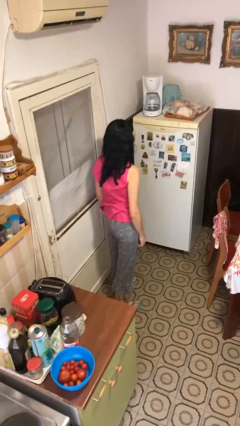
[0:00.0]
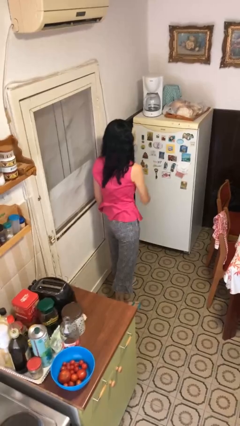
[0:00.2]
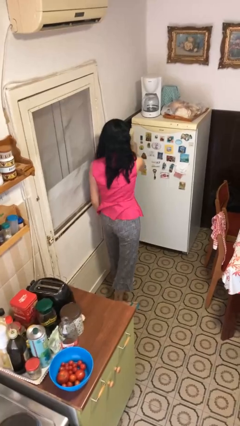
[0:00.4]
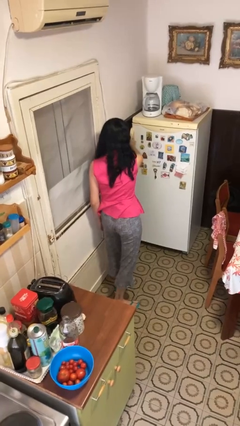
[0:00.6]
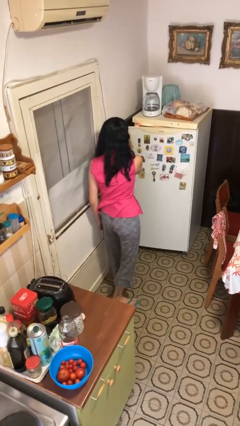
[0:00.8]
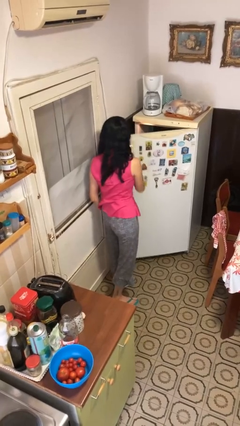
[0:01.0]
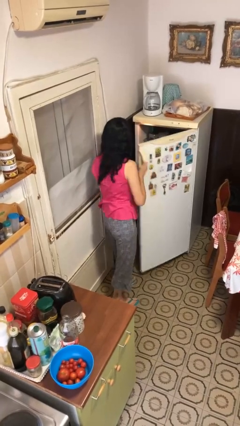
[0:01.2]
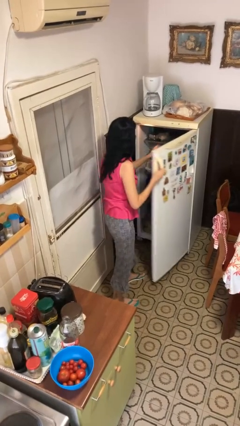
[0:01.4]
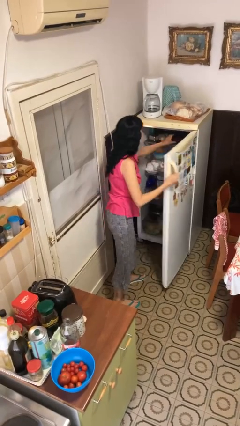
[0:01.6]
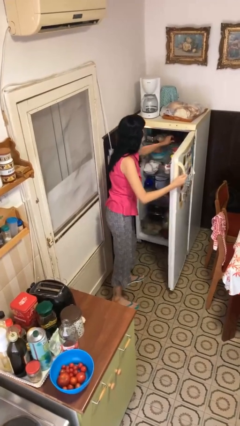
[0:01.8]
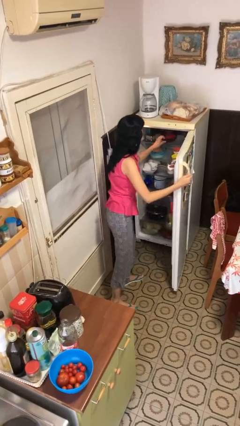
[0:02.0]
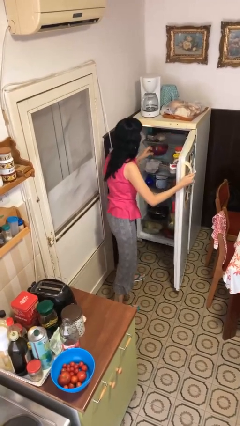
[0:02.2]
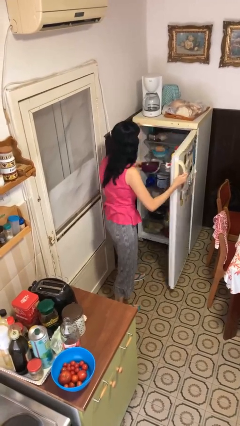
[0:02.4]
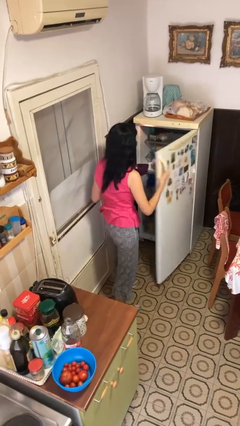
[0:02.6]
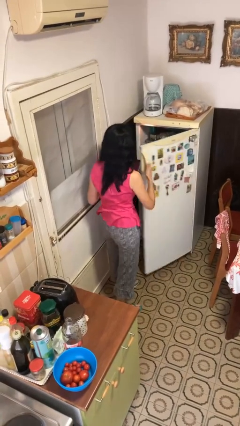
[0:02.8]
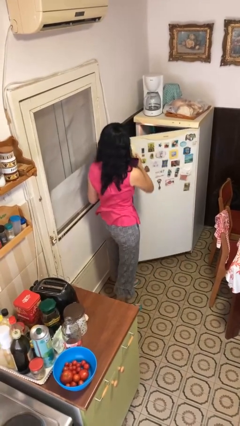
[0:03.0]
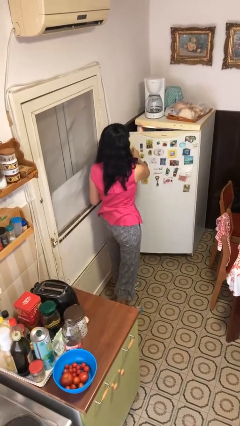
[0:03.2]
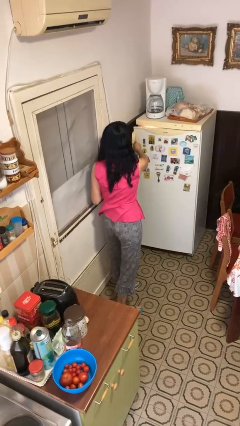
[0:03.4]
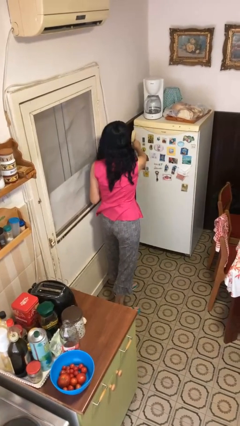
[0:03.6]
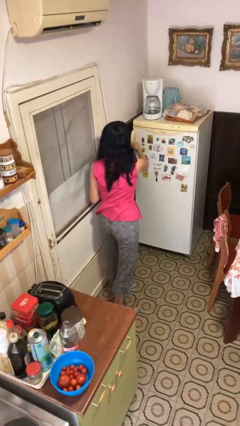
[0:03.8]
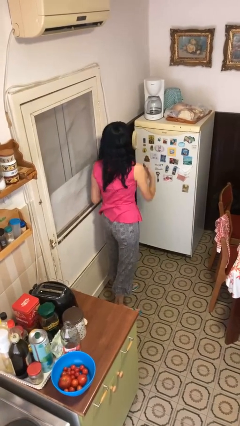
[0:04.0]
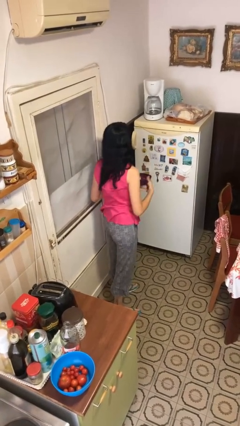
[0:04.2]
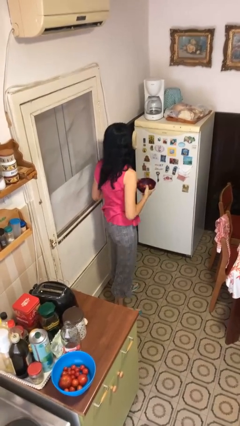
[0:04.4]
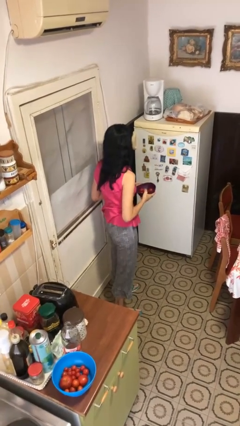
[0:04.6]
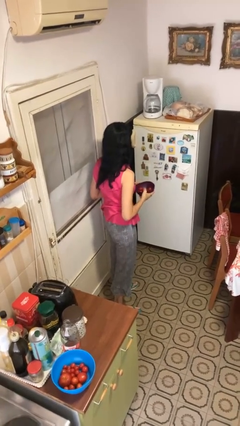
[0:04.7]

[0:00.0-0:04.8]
person takes object from refrigerator

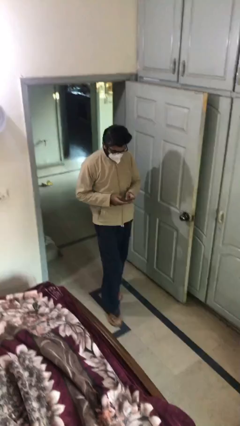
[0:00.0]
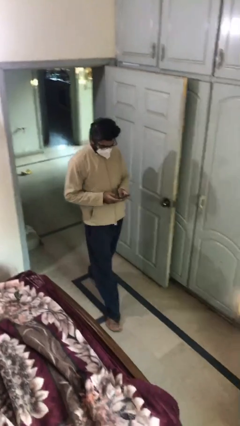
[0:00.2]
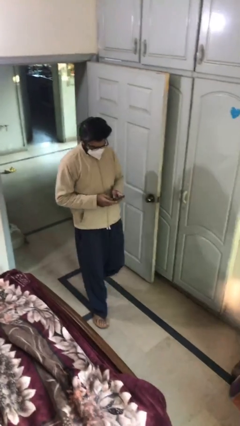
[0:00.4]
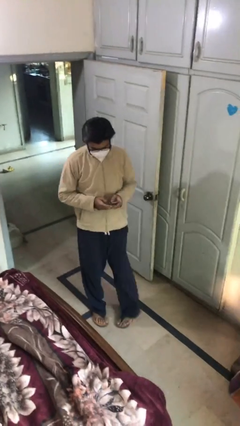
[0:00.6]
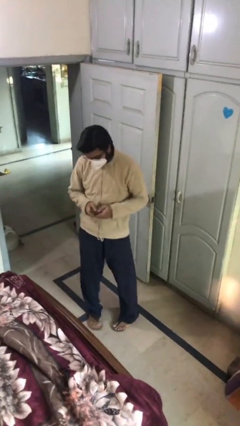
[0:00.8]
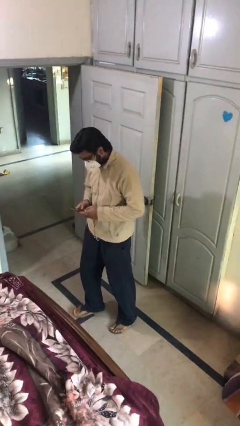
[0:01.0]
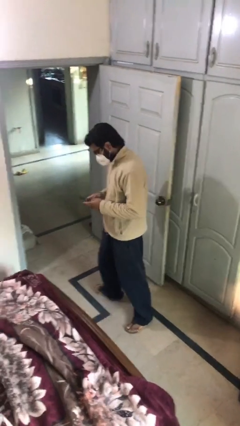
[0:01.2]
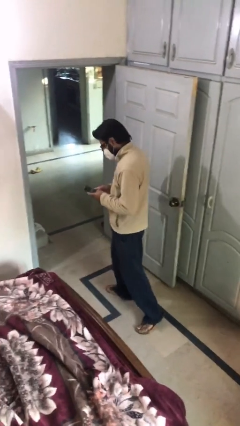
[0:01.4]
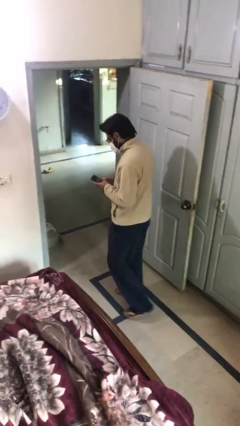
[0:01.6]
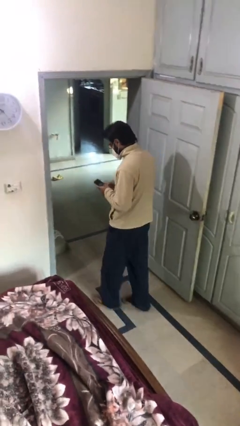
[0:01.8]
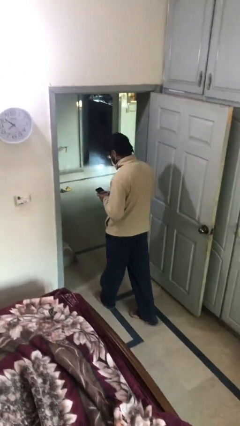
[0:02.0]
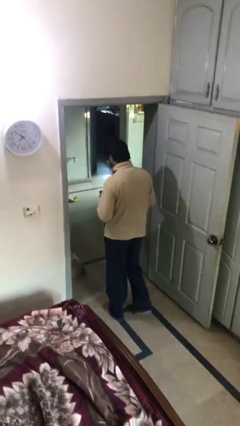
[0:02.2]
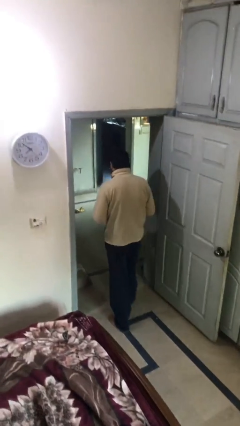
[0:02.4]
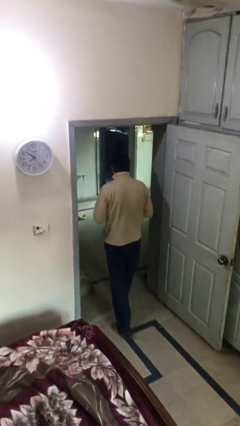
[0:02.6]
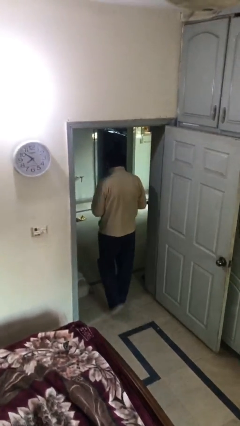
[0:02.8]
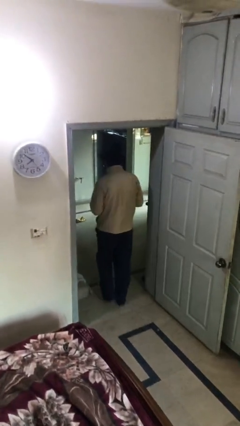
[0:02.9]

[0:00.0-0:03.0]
person exits scene through structure

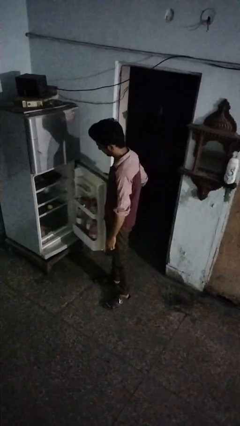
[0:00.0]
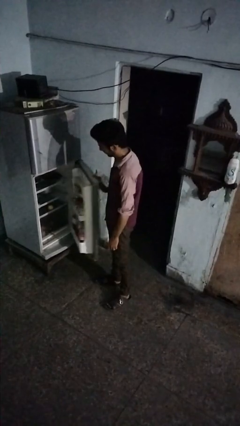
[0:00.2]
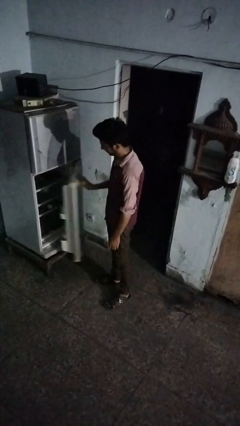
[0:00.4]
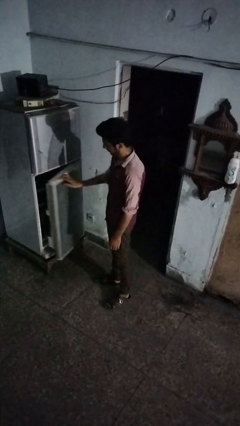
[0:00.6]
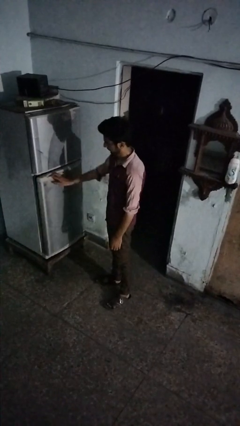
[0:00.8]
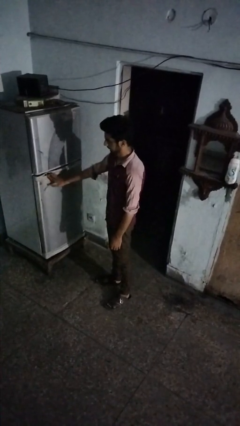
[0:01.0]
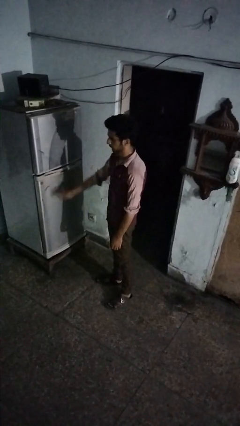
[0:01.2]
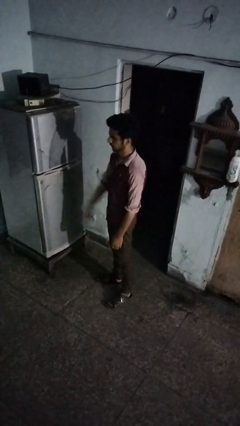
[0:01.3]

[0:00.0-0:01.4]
person closes refrigerator

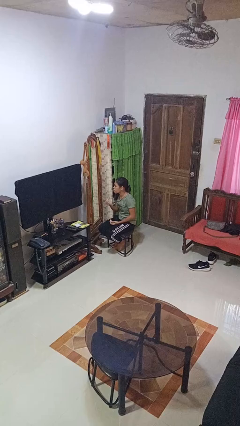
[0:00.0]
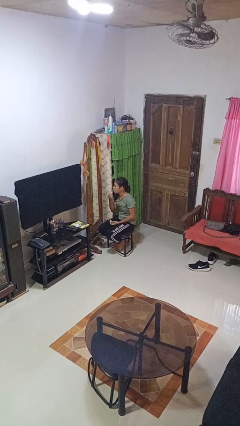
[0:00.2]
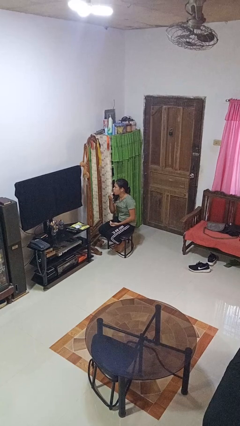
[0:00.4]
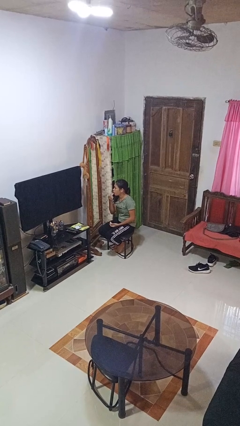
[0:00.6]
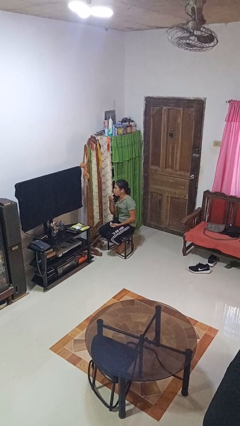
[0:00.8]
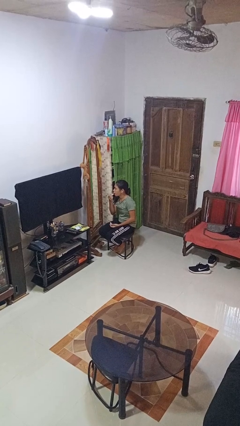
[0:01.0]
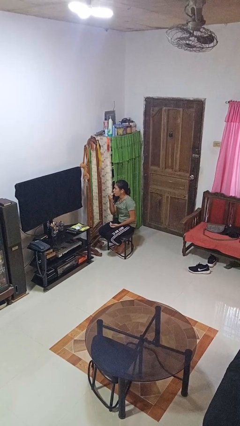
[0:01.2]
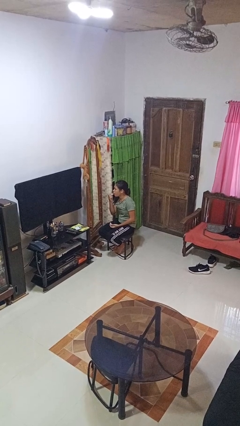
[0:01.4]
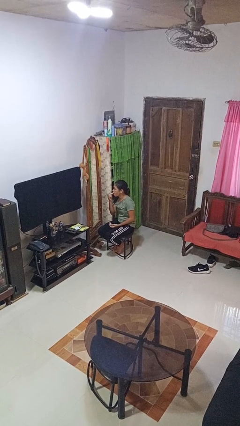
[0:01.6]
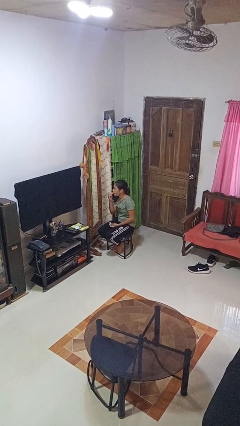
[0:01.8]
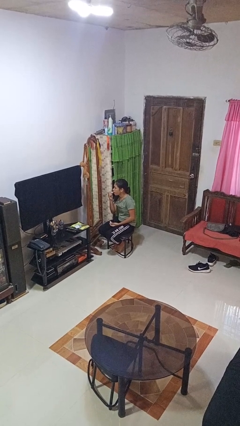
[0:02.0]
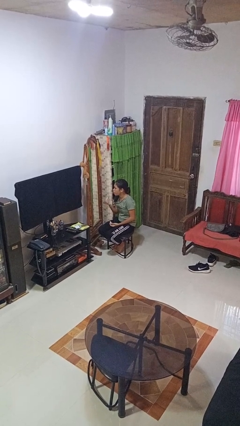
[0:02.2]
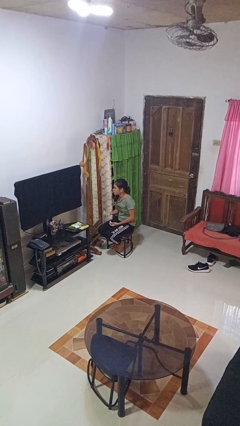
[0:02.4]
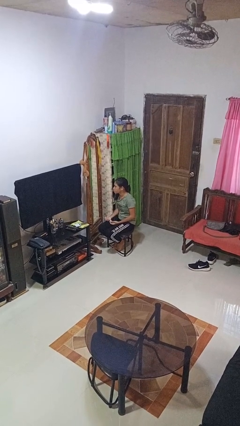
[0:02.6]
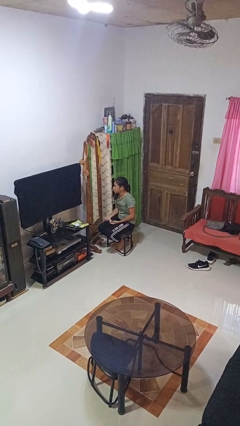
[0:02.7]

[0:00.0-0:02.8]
person applies lip makeup

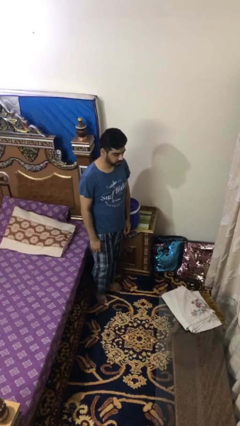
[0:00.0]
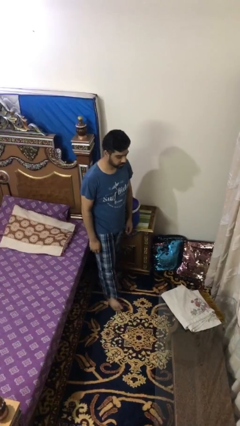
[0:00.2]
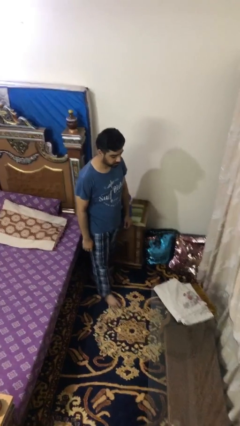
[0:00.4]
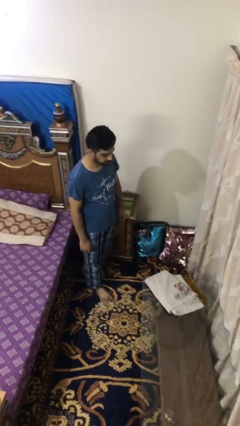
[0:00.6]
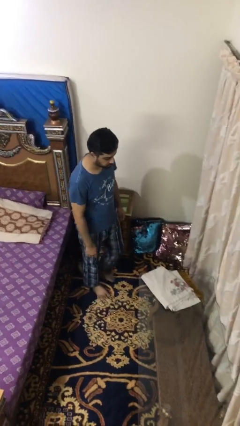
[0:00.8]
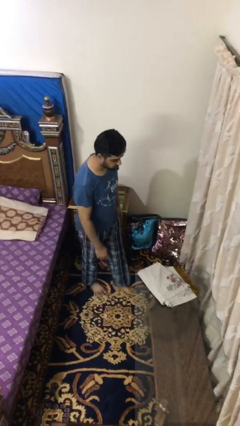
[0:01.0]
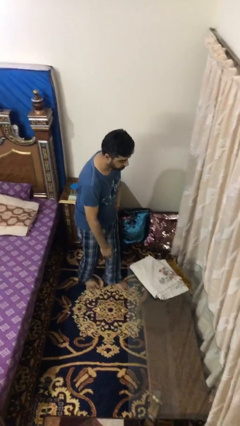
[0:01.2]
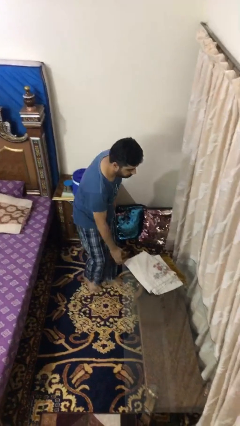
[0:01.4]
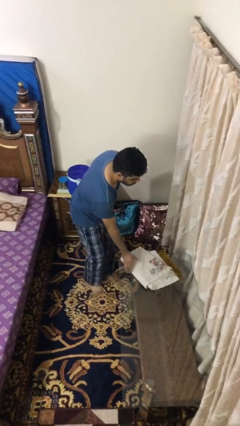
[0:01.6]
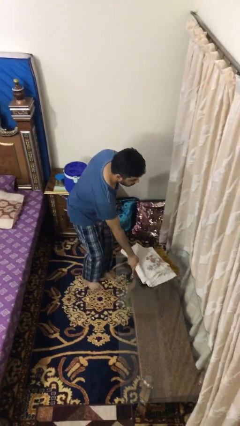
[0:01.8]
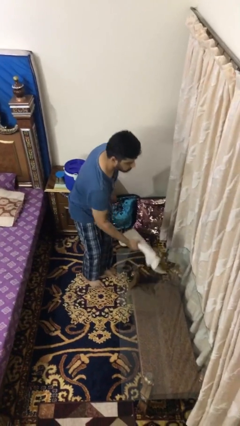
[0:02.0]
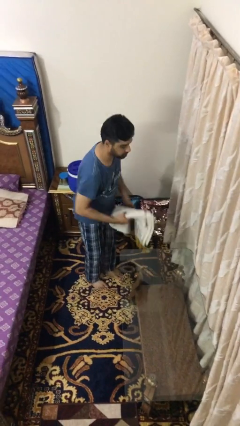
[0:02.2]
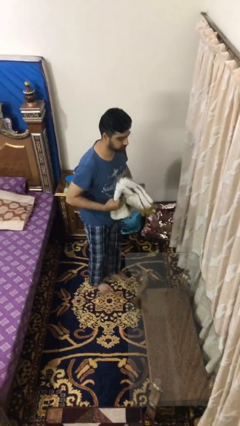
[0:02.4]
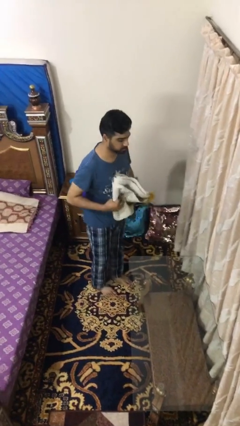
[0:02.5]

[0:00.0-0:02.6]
person picks up object from table

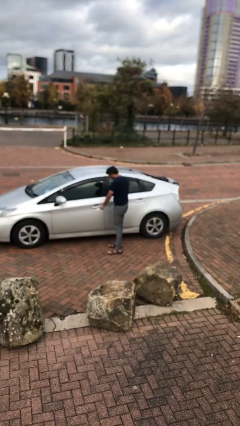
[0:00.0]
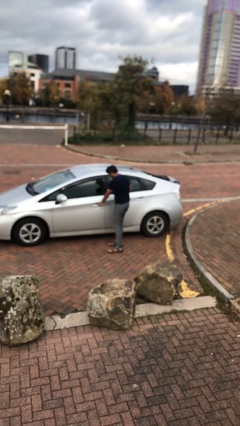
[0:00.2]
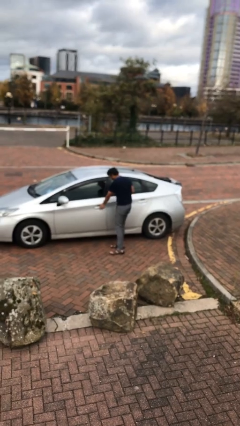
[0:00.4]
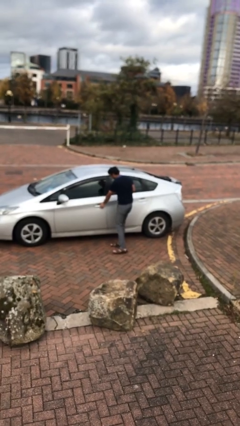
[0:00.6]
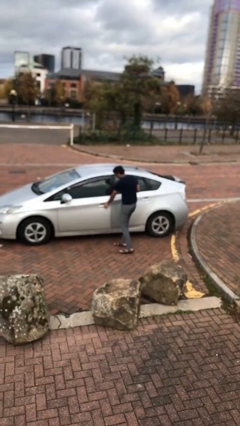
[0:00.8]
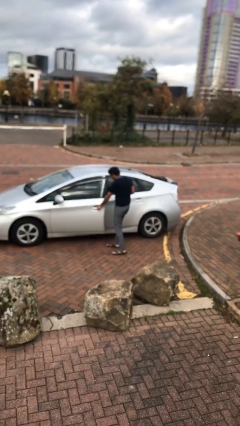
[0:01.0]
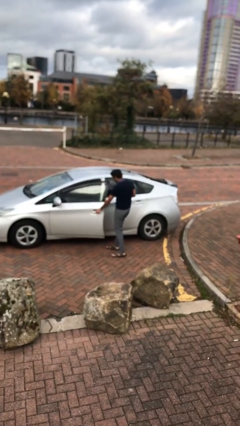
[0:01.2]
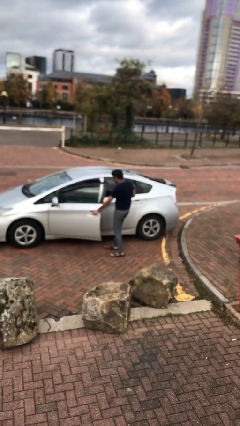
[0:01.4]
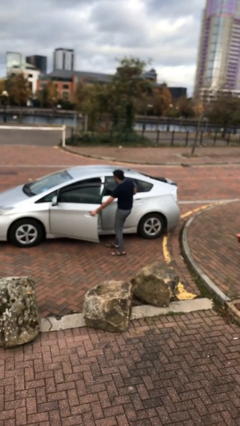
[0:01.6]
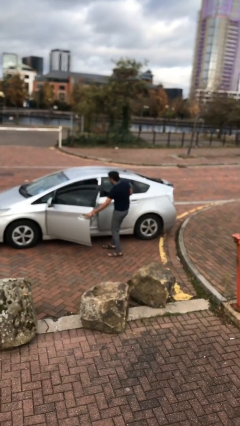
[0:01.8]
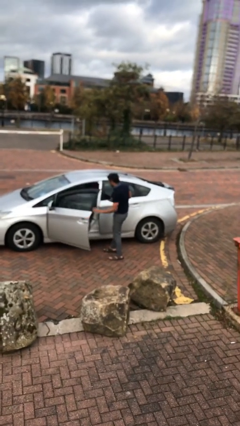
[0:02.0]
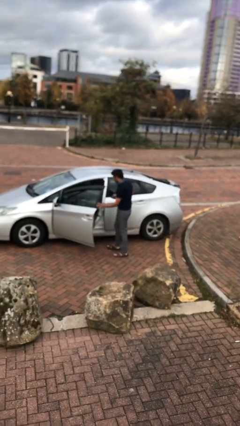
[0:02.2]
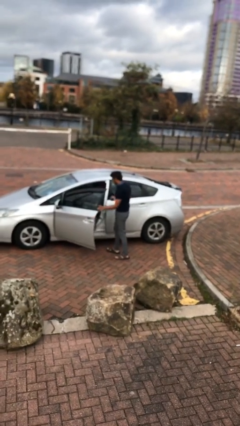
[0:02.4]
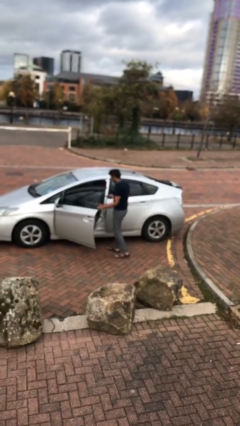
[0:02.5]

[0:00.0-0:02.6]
person opens car door

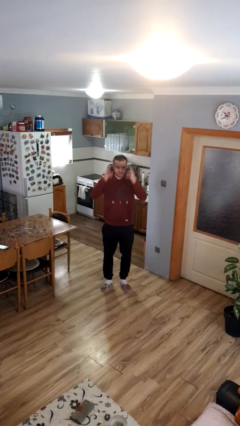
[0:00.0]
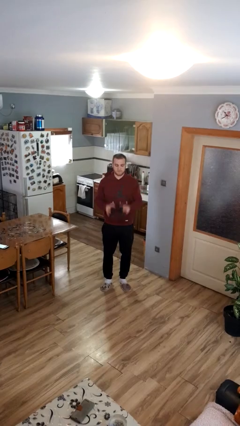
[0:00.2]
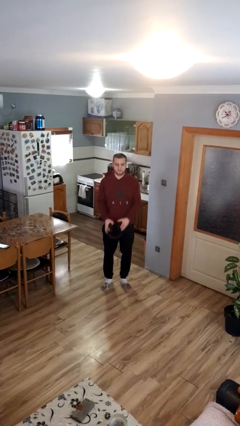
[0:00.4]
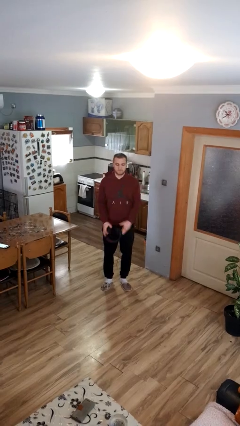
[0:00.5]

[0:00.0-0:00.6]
person takes off headphones
